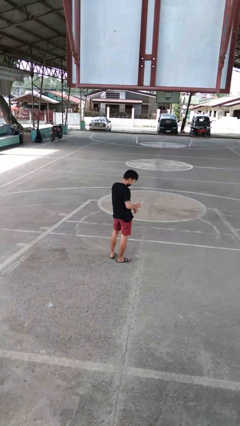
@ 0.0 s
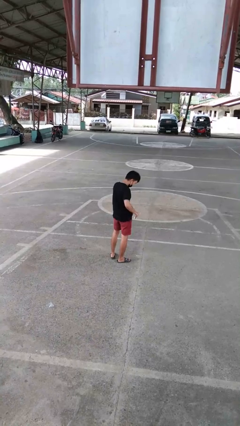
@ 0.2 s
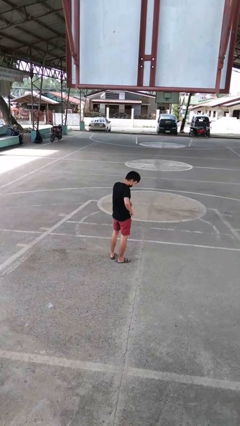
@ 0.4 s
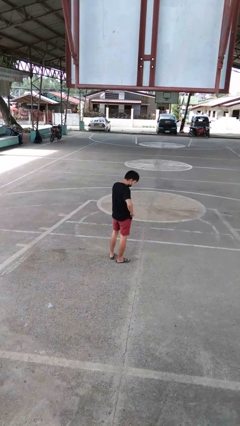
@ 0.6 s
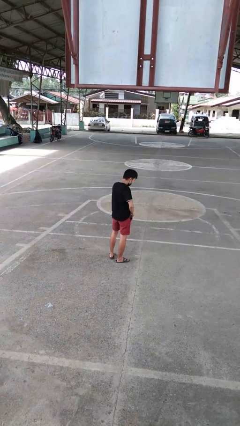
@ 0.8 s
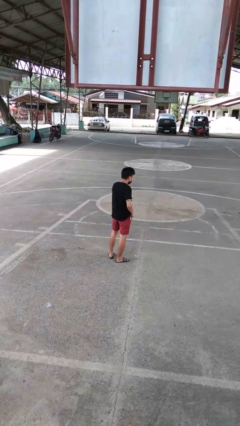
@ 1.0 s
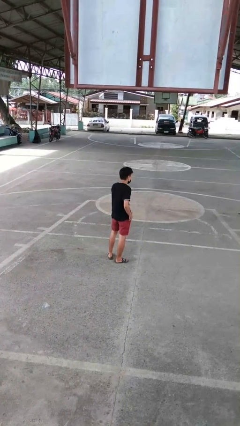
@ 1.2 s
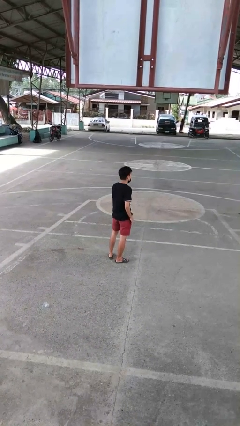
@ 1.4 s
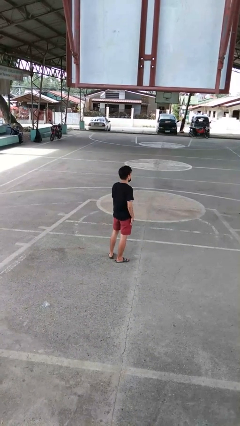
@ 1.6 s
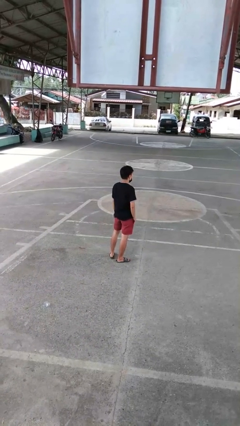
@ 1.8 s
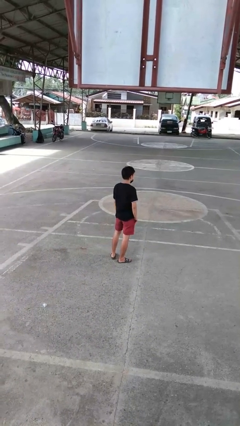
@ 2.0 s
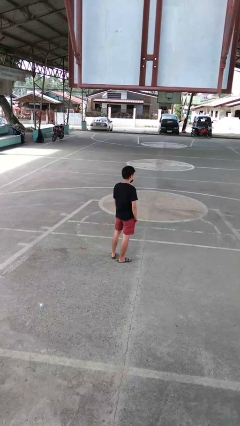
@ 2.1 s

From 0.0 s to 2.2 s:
person puts phone into pocket

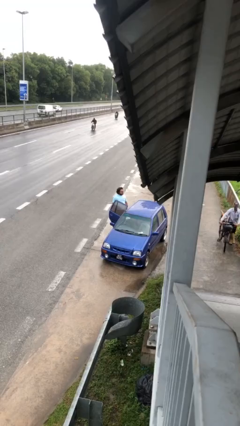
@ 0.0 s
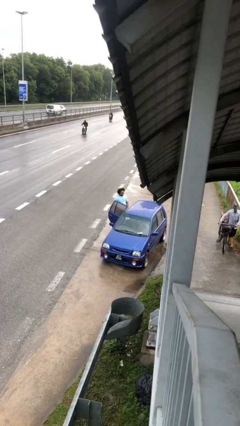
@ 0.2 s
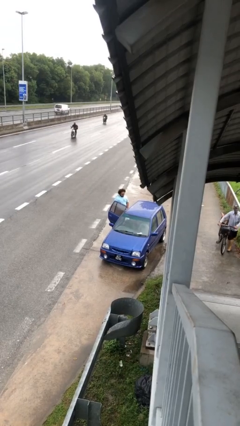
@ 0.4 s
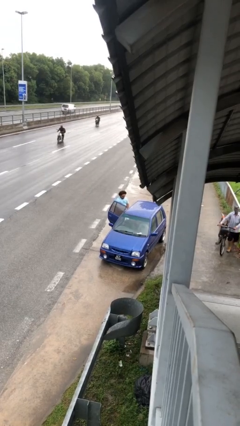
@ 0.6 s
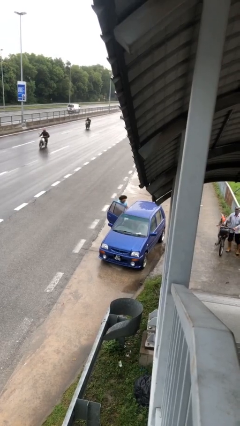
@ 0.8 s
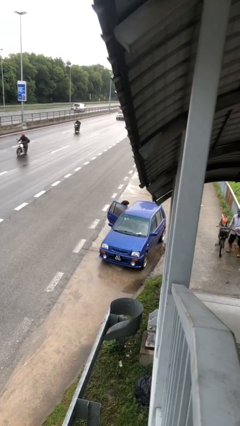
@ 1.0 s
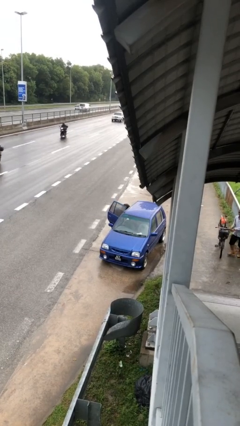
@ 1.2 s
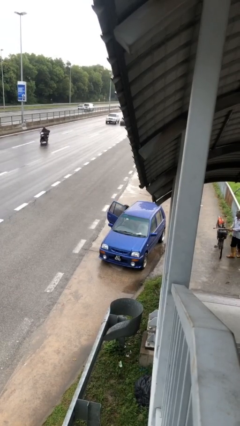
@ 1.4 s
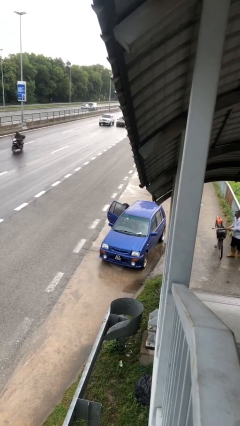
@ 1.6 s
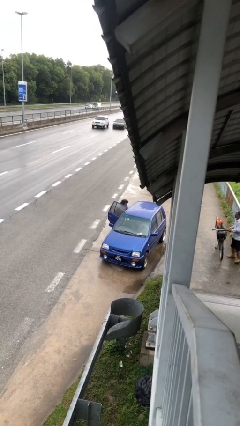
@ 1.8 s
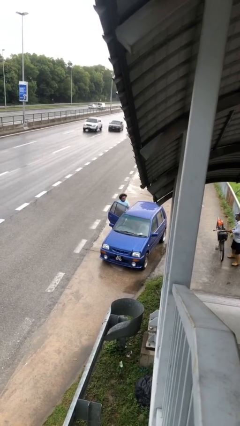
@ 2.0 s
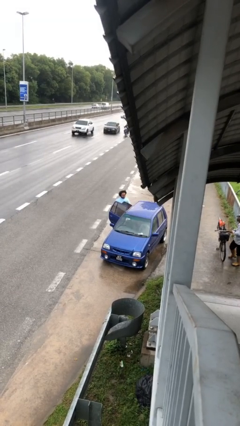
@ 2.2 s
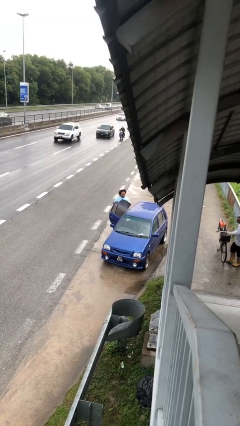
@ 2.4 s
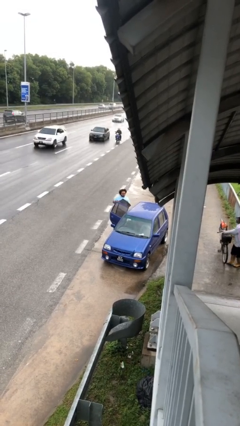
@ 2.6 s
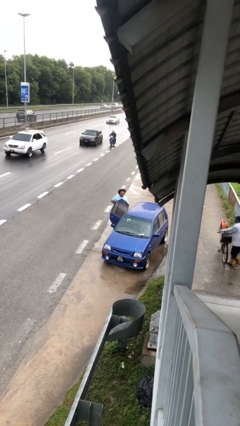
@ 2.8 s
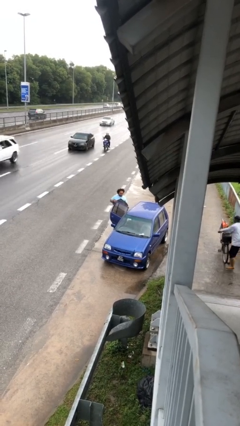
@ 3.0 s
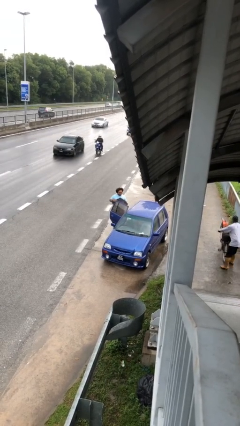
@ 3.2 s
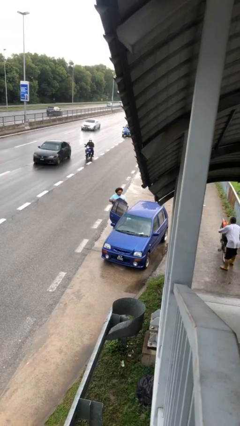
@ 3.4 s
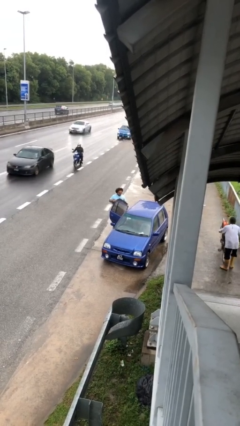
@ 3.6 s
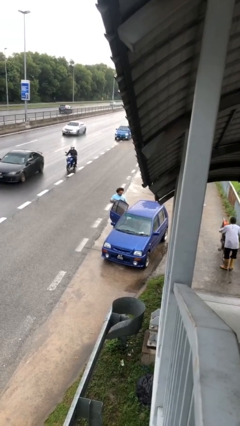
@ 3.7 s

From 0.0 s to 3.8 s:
person unloads car

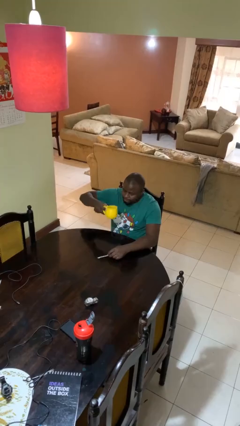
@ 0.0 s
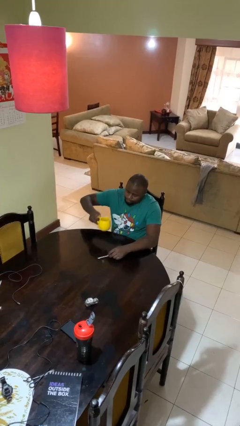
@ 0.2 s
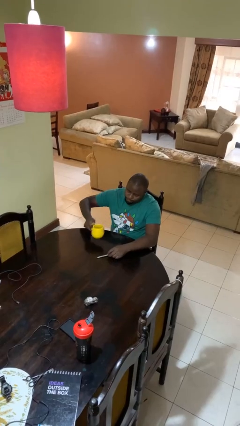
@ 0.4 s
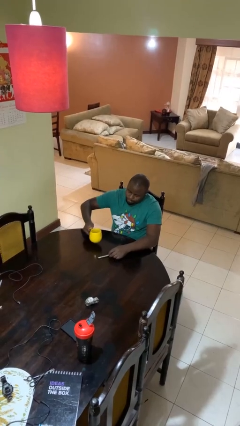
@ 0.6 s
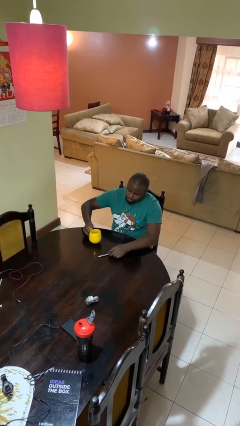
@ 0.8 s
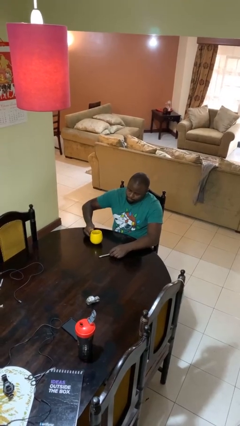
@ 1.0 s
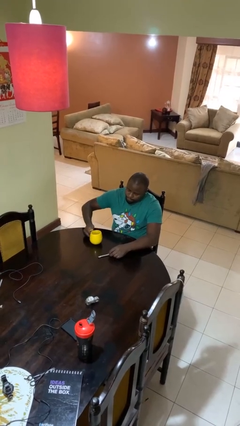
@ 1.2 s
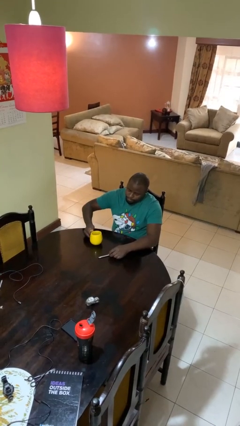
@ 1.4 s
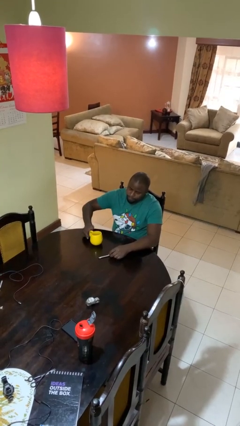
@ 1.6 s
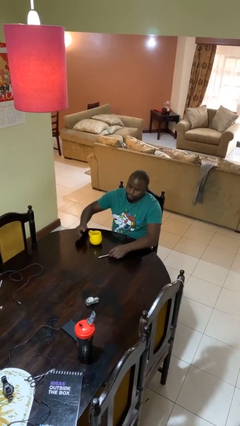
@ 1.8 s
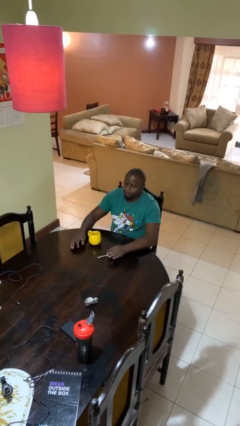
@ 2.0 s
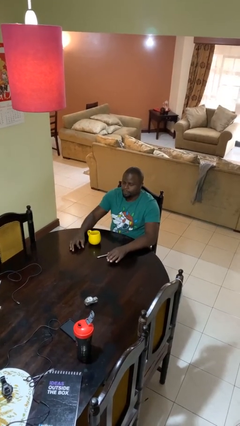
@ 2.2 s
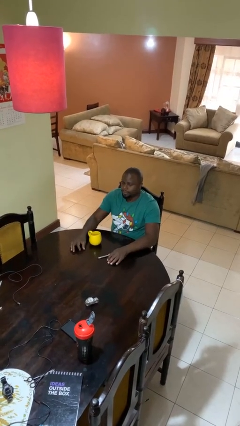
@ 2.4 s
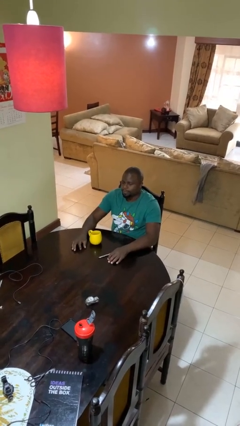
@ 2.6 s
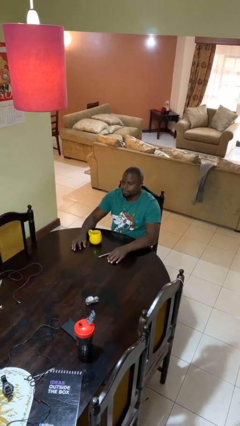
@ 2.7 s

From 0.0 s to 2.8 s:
person puts down object on table

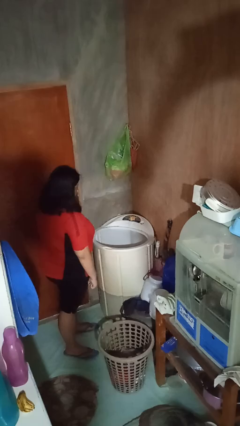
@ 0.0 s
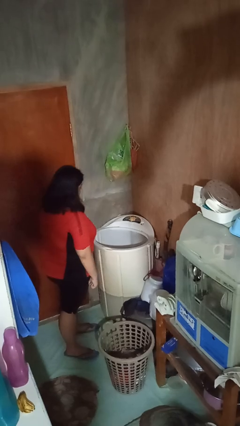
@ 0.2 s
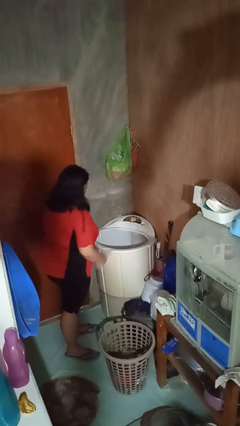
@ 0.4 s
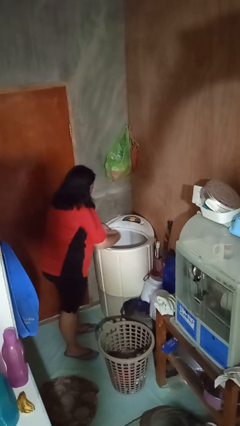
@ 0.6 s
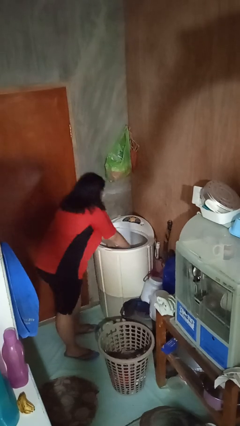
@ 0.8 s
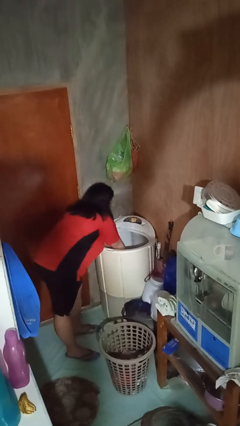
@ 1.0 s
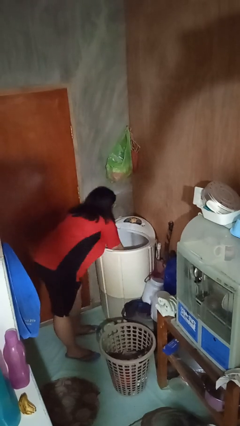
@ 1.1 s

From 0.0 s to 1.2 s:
person loads clotheswasher

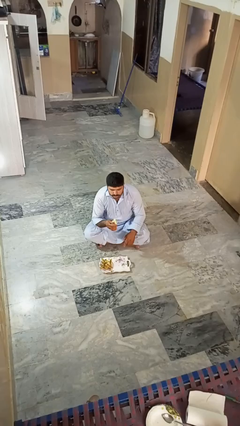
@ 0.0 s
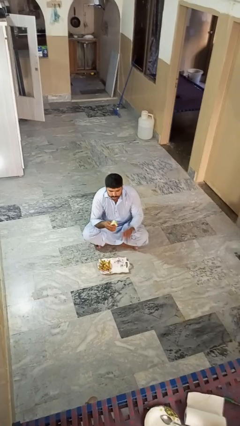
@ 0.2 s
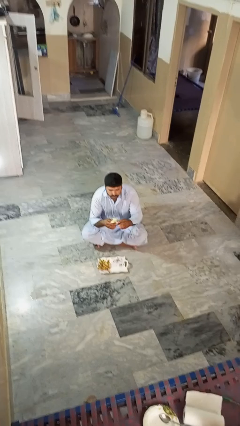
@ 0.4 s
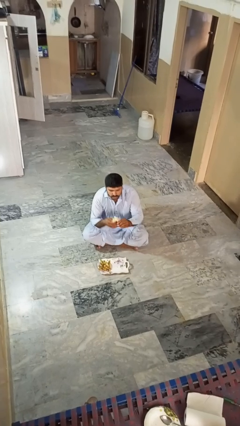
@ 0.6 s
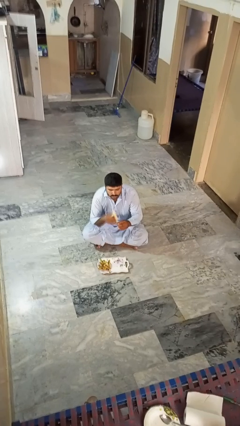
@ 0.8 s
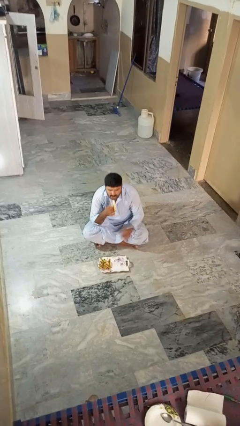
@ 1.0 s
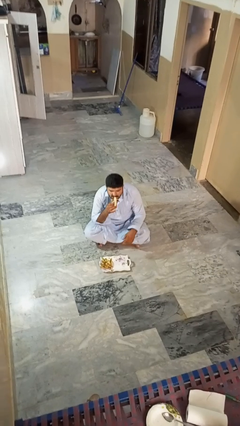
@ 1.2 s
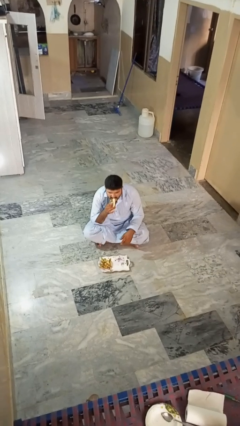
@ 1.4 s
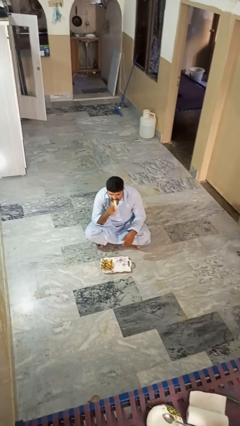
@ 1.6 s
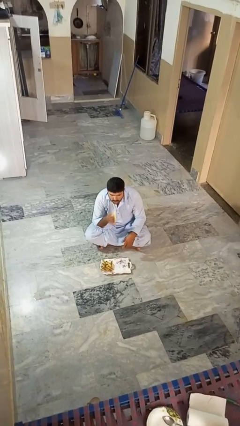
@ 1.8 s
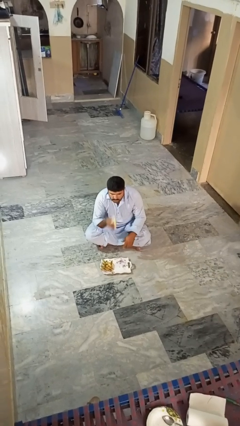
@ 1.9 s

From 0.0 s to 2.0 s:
person eats banana

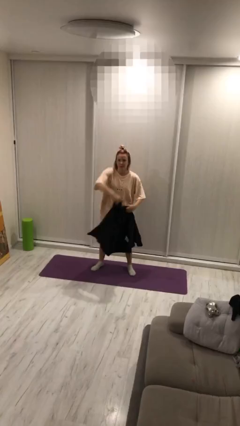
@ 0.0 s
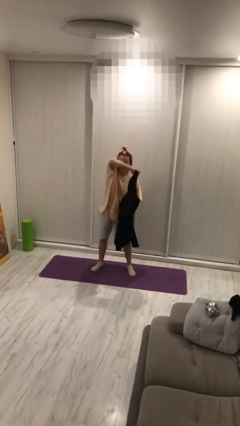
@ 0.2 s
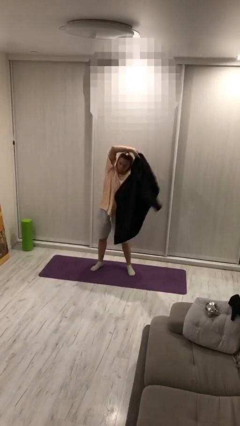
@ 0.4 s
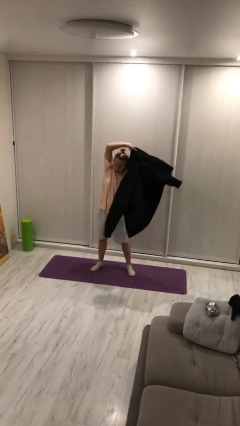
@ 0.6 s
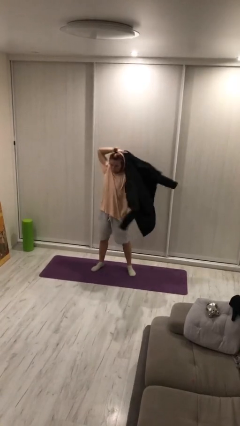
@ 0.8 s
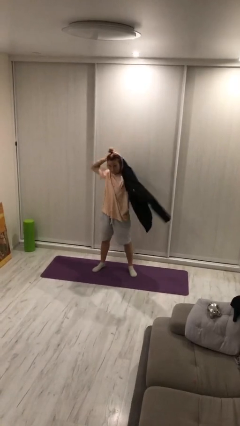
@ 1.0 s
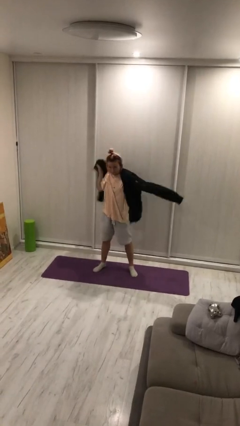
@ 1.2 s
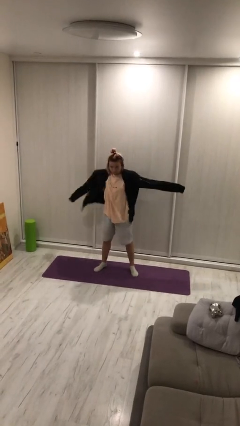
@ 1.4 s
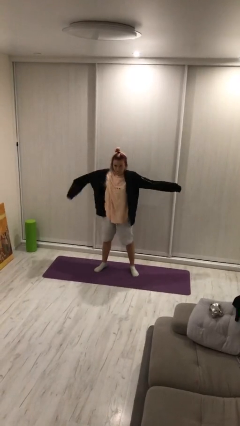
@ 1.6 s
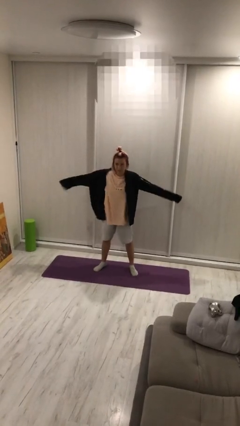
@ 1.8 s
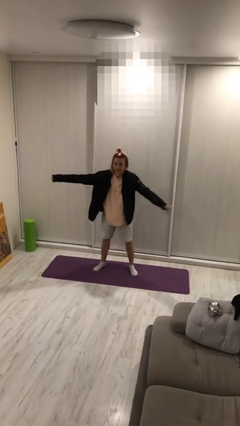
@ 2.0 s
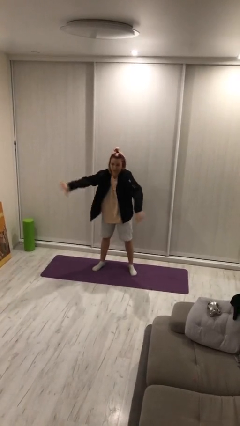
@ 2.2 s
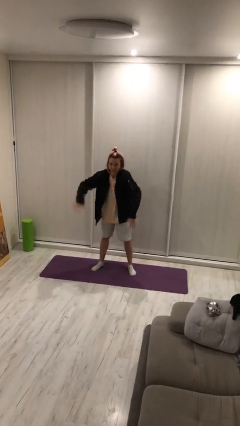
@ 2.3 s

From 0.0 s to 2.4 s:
person puts on jacket

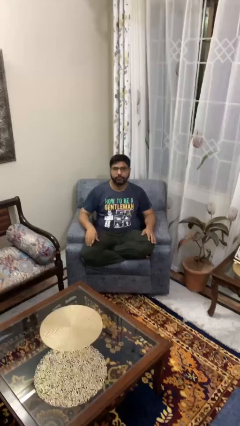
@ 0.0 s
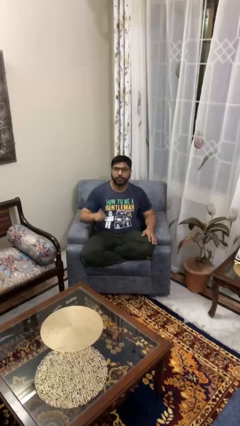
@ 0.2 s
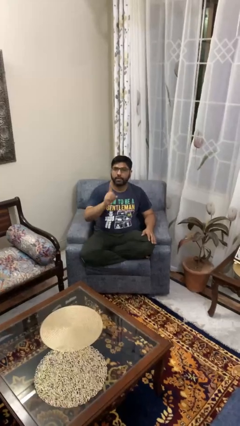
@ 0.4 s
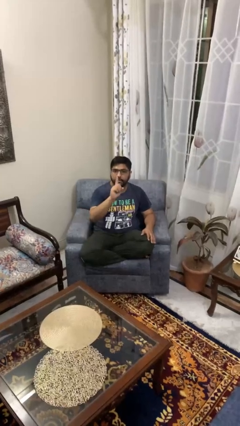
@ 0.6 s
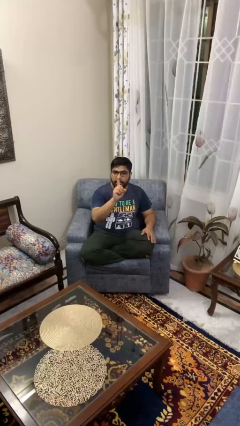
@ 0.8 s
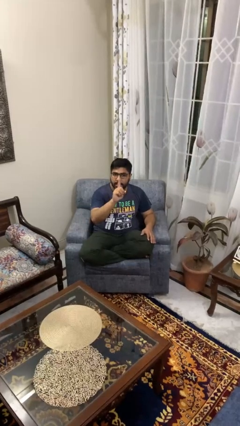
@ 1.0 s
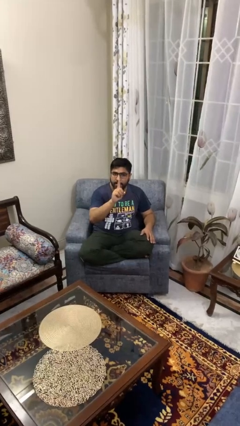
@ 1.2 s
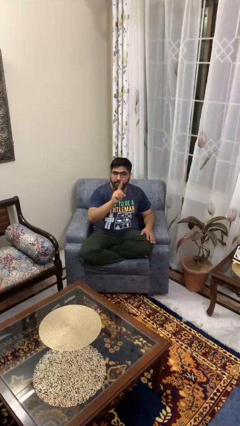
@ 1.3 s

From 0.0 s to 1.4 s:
person gestures number one

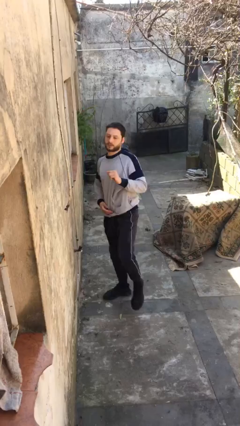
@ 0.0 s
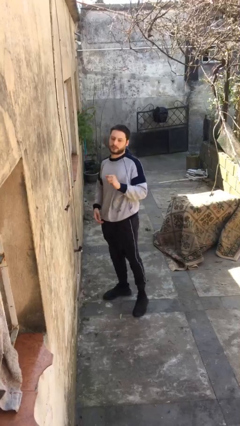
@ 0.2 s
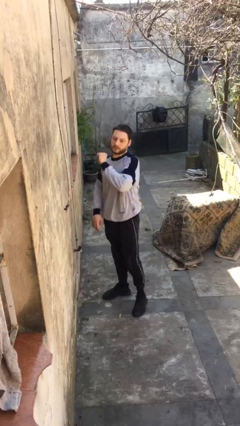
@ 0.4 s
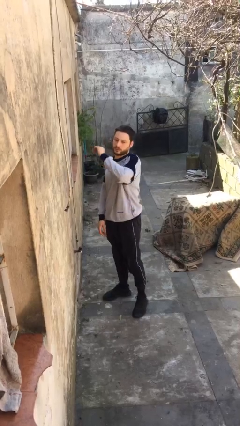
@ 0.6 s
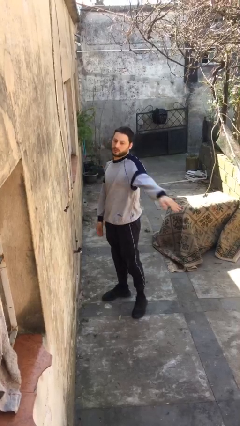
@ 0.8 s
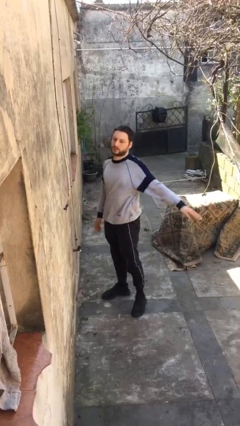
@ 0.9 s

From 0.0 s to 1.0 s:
person karate kicks

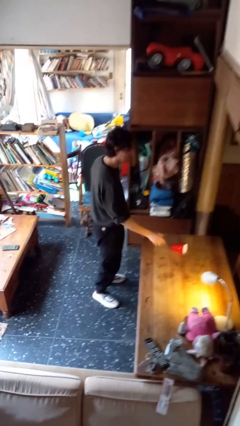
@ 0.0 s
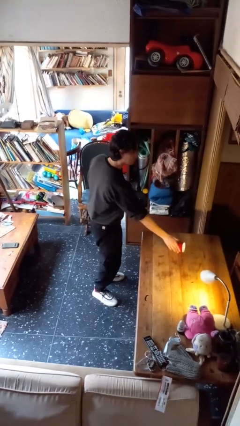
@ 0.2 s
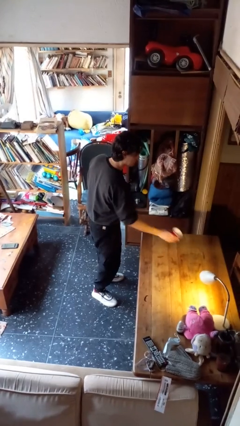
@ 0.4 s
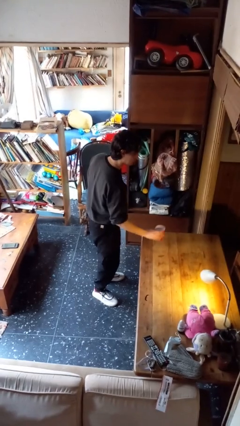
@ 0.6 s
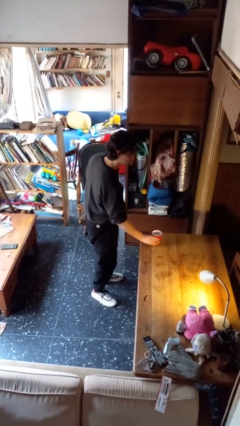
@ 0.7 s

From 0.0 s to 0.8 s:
person sets upright glass
